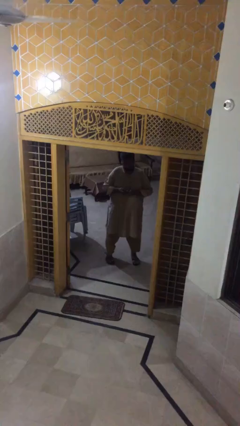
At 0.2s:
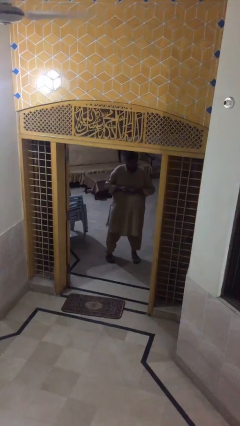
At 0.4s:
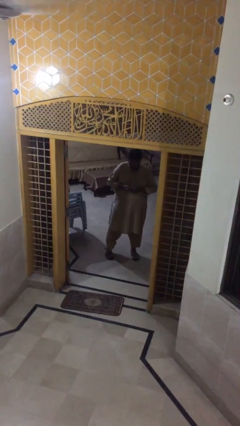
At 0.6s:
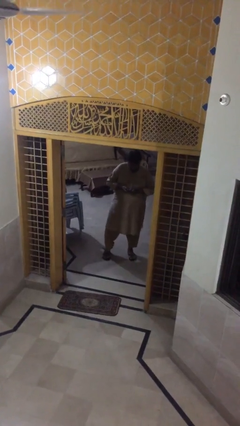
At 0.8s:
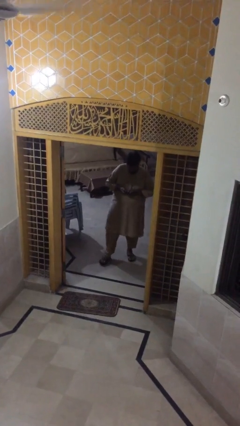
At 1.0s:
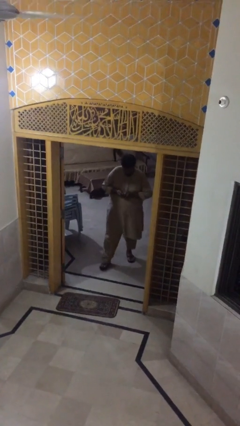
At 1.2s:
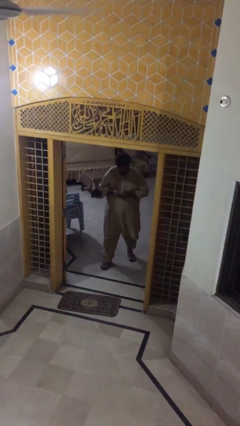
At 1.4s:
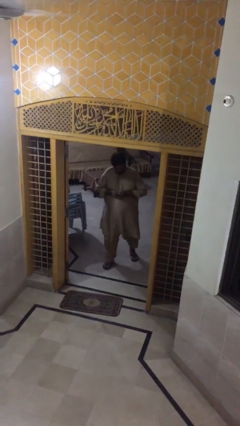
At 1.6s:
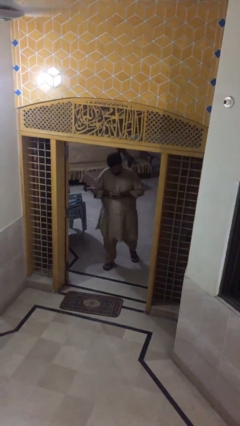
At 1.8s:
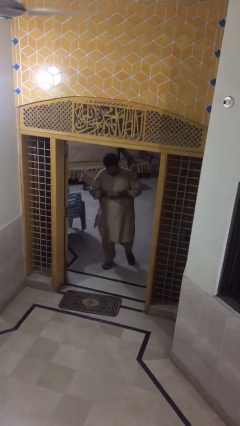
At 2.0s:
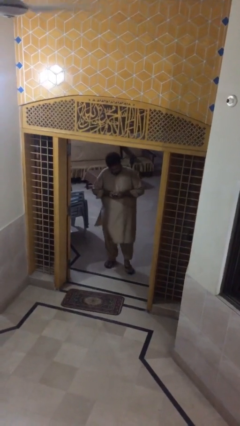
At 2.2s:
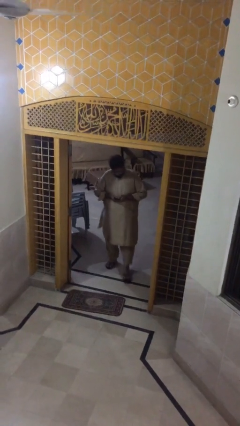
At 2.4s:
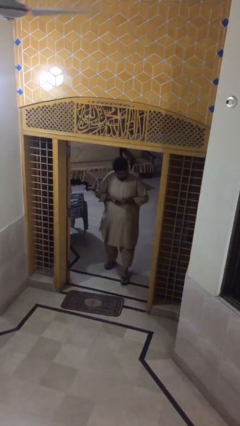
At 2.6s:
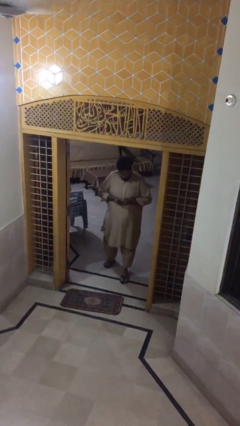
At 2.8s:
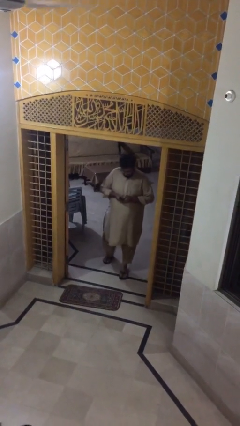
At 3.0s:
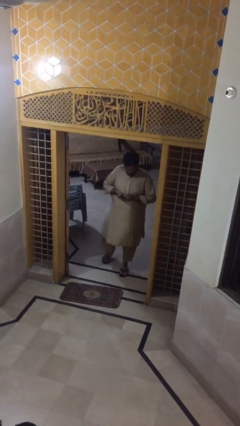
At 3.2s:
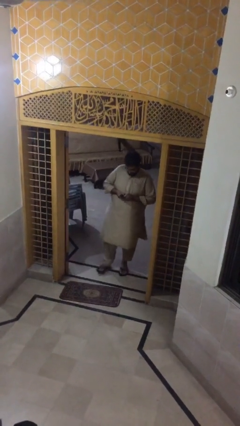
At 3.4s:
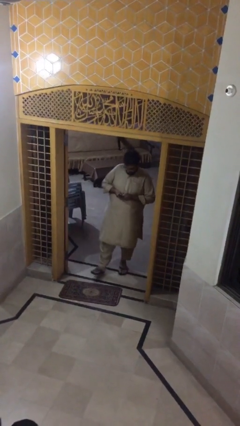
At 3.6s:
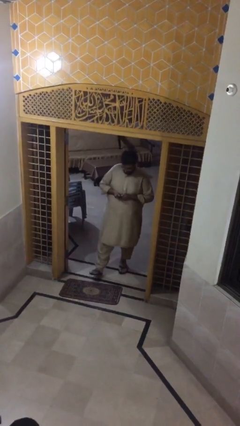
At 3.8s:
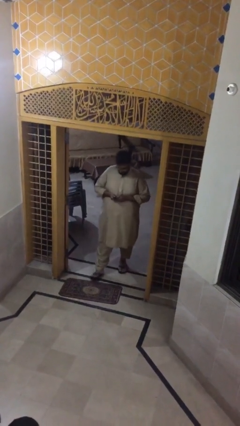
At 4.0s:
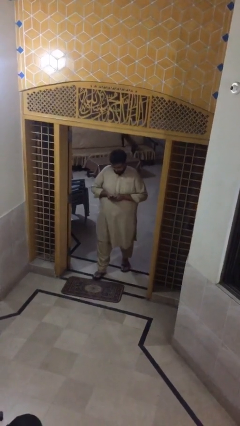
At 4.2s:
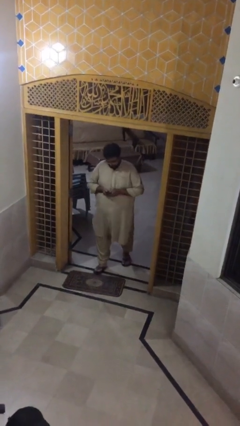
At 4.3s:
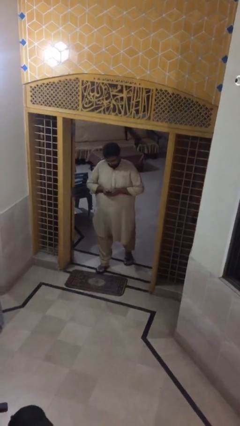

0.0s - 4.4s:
person texts on phone

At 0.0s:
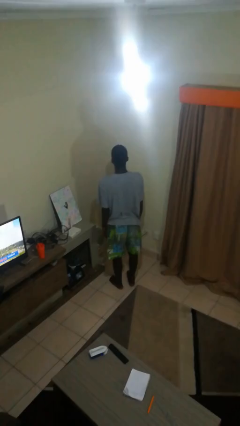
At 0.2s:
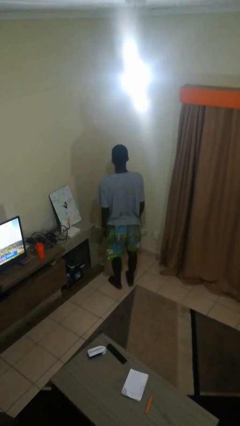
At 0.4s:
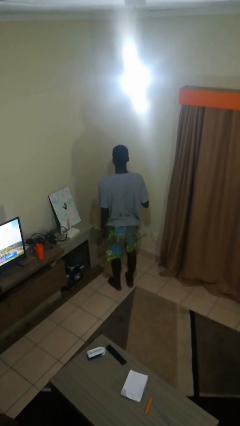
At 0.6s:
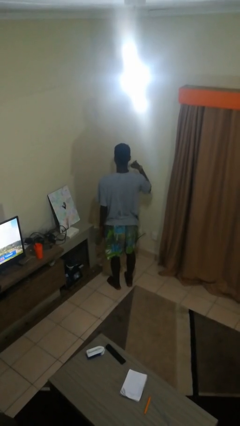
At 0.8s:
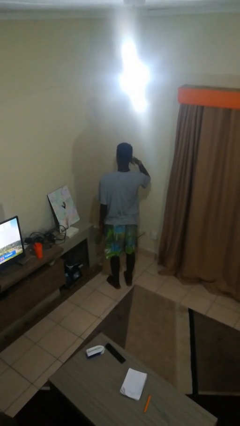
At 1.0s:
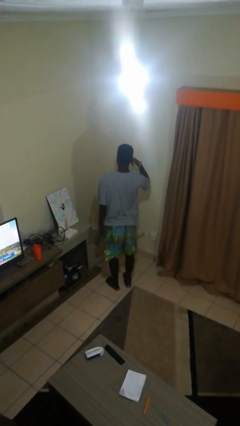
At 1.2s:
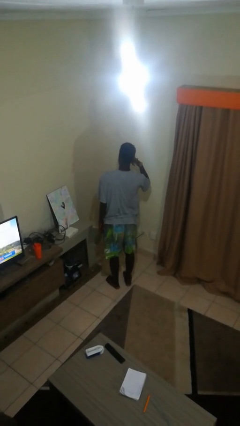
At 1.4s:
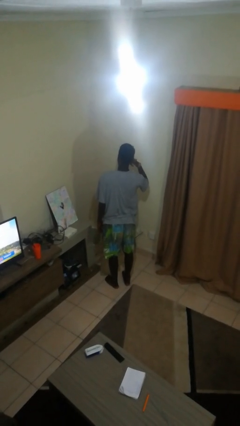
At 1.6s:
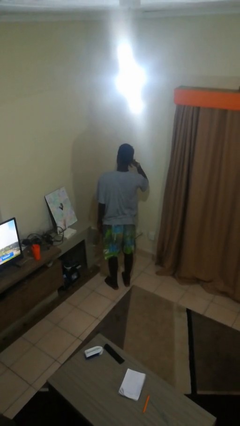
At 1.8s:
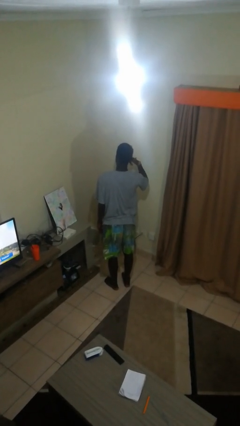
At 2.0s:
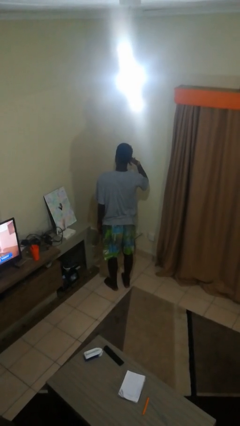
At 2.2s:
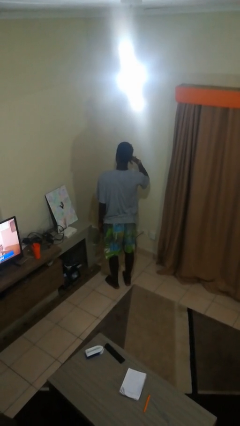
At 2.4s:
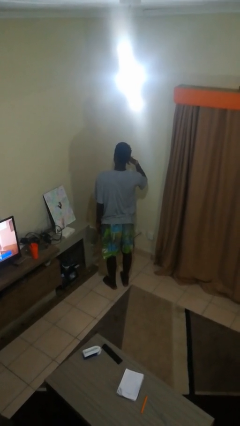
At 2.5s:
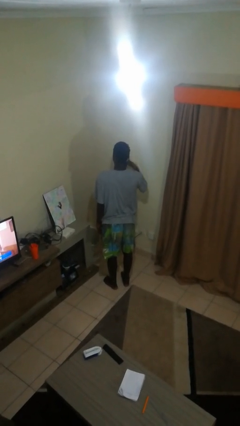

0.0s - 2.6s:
person gestures call me

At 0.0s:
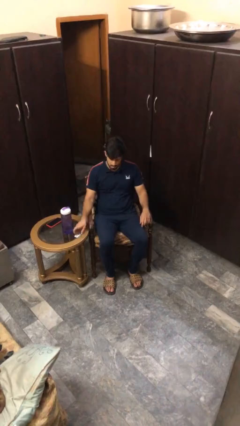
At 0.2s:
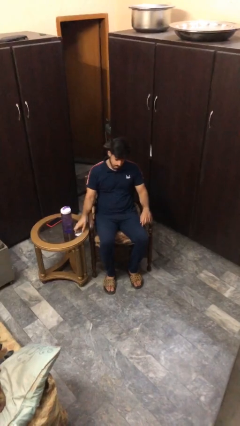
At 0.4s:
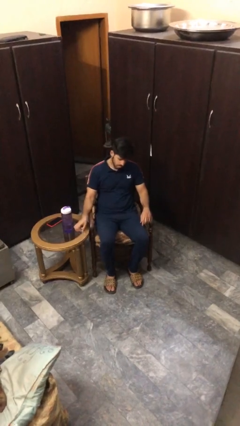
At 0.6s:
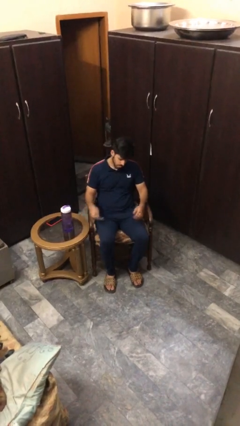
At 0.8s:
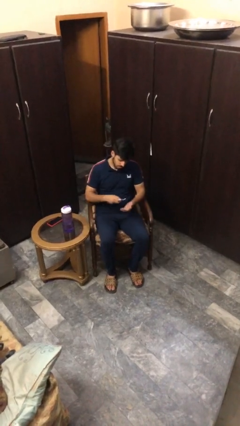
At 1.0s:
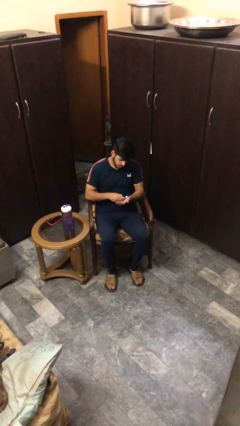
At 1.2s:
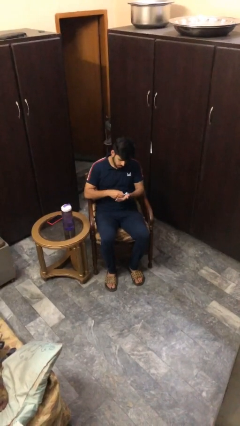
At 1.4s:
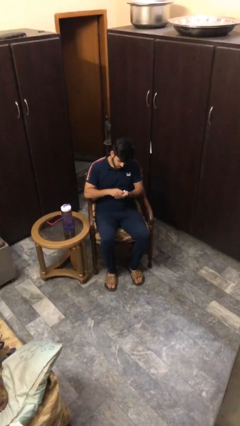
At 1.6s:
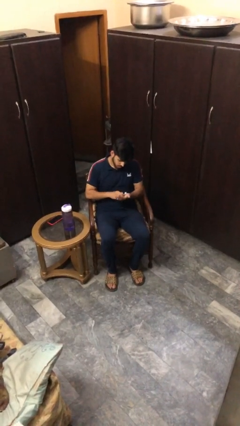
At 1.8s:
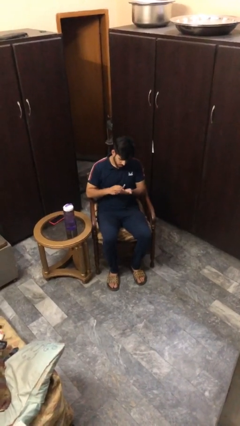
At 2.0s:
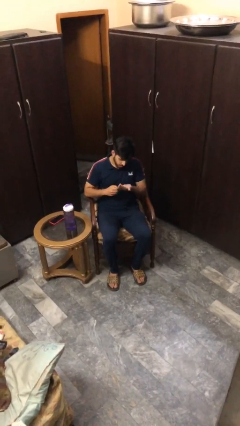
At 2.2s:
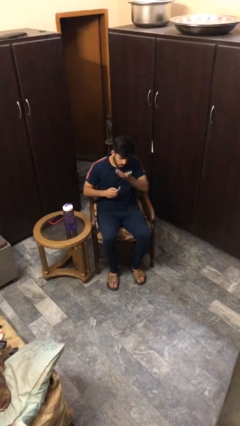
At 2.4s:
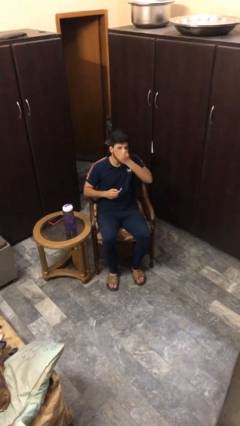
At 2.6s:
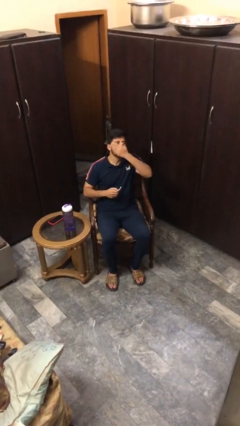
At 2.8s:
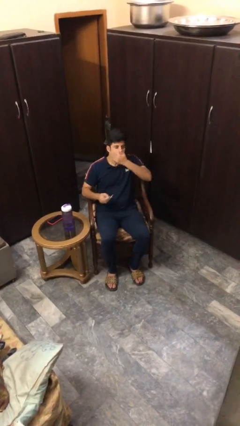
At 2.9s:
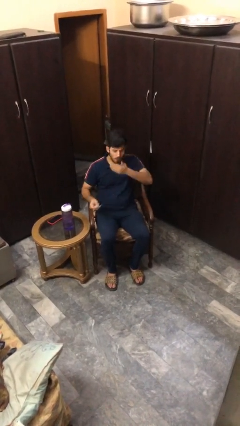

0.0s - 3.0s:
person takes medicine pills

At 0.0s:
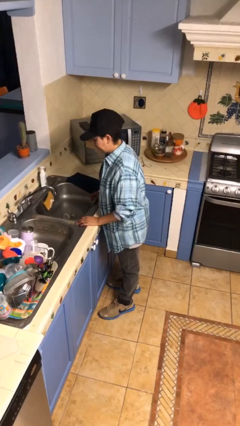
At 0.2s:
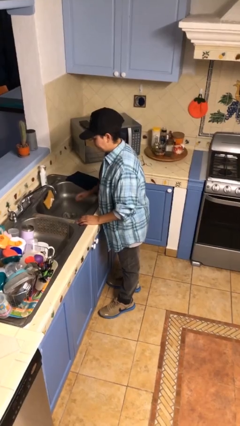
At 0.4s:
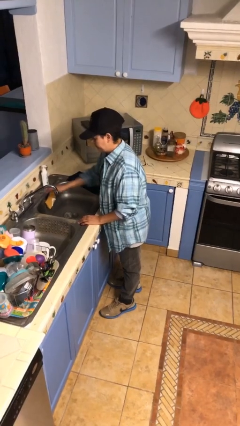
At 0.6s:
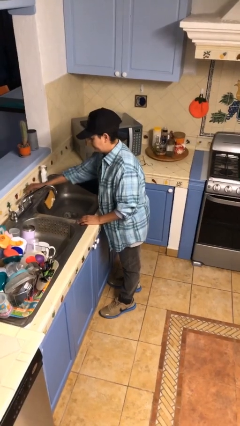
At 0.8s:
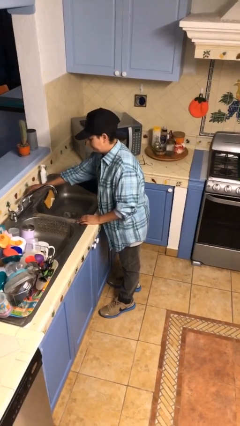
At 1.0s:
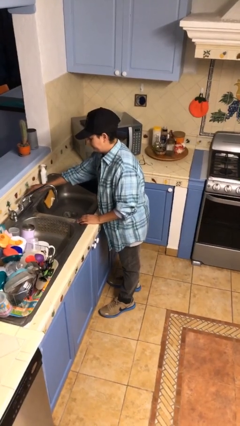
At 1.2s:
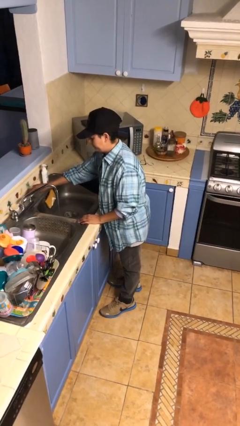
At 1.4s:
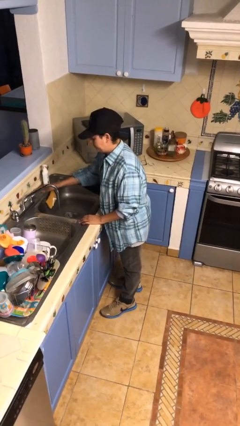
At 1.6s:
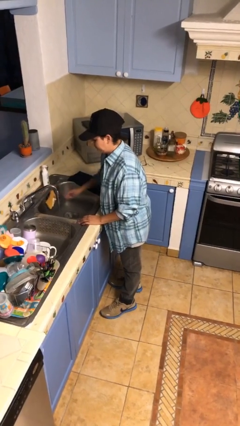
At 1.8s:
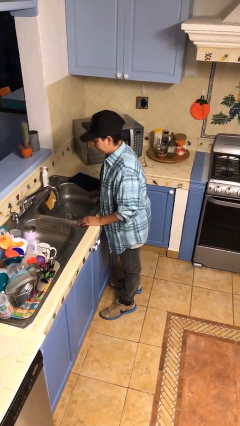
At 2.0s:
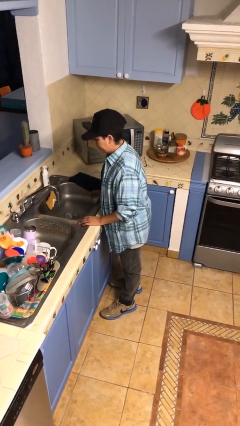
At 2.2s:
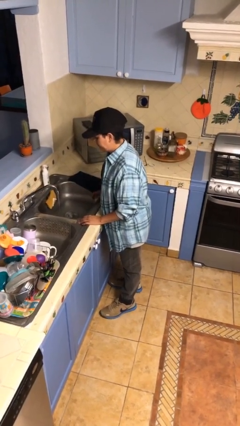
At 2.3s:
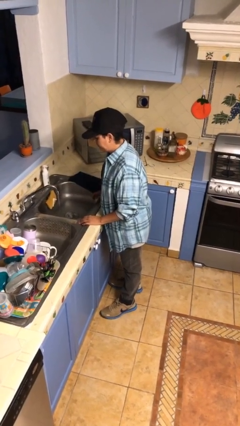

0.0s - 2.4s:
person turns on faucet

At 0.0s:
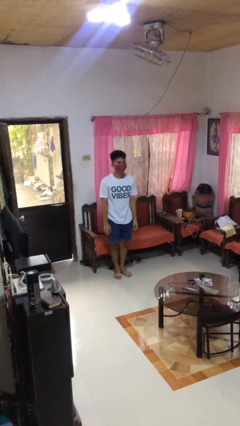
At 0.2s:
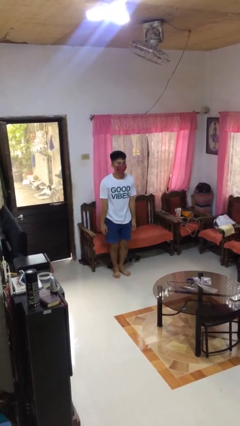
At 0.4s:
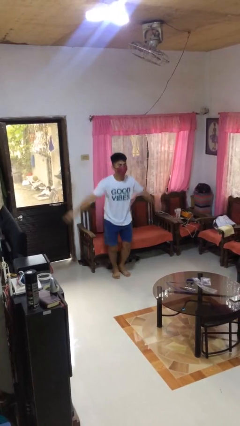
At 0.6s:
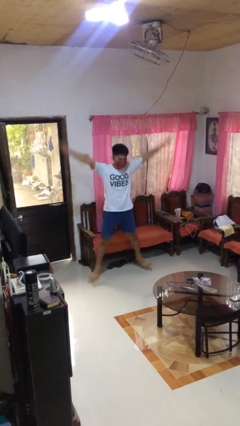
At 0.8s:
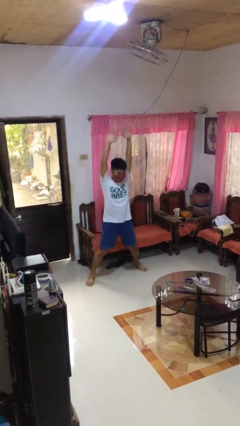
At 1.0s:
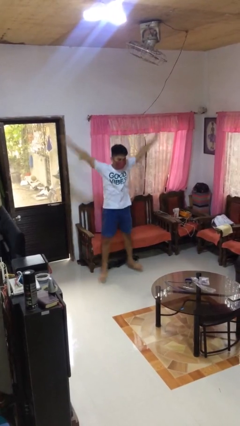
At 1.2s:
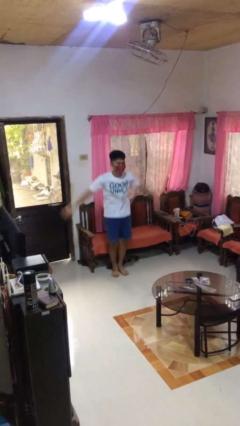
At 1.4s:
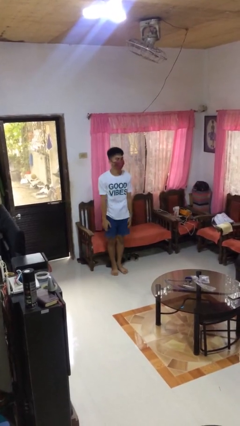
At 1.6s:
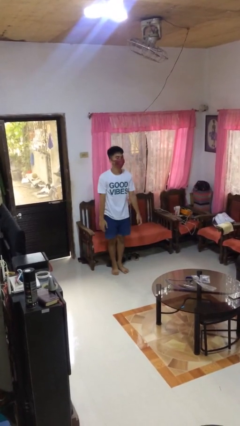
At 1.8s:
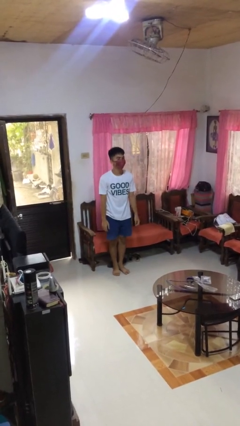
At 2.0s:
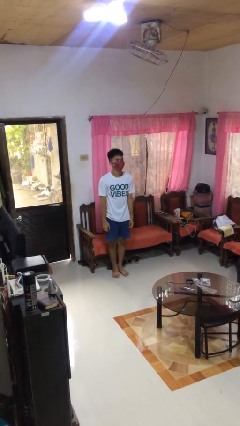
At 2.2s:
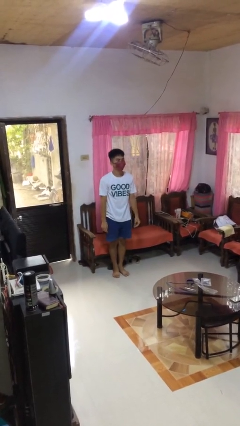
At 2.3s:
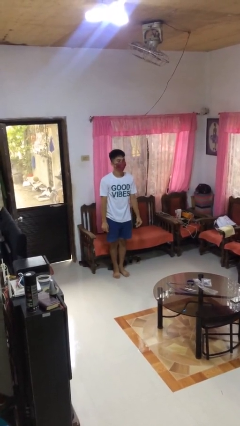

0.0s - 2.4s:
person exercises with jumping jacks

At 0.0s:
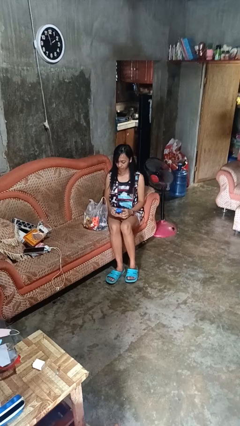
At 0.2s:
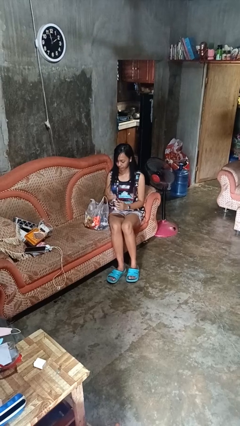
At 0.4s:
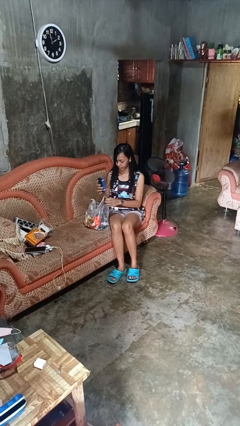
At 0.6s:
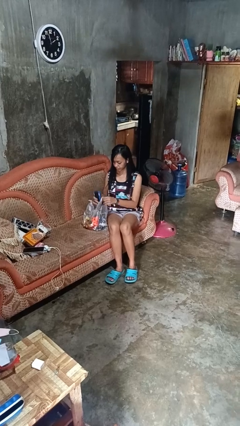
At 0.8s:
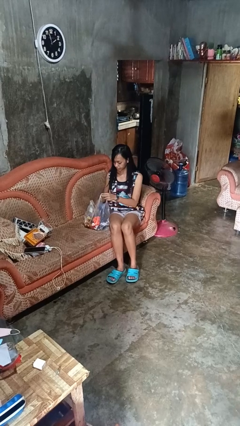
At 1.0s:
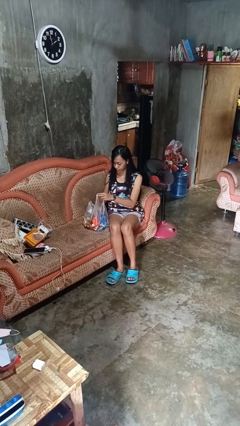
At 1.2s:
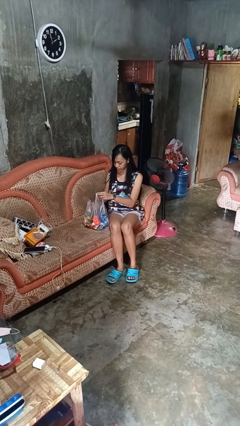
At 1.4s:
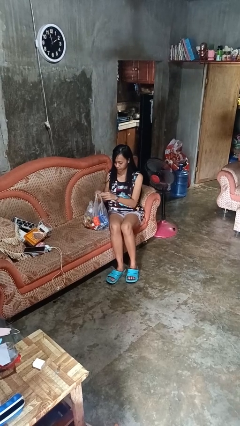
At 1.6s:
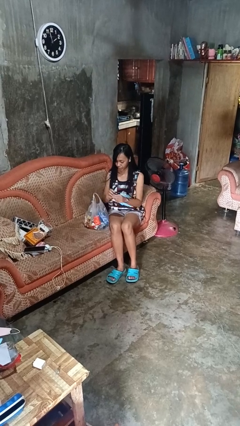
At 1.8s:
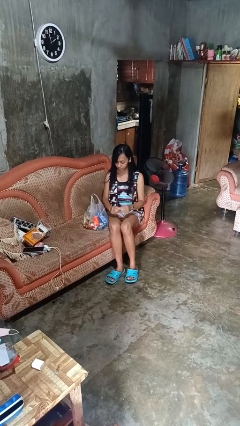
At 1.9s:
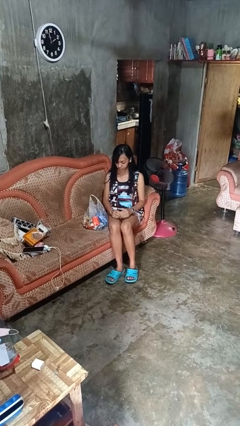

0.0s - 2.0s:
person puts object into bag

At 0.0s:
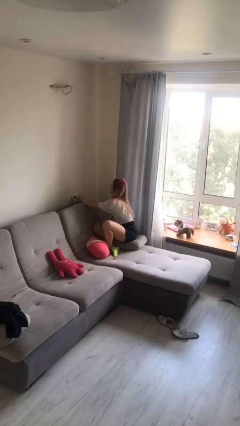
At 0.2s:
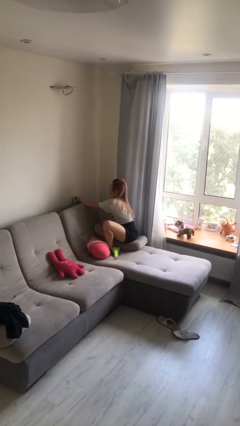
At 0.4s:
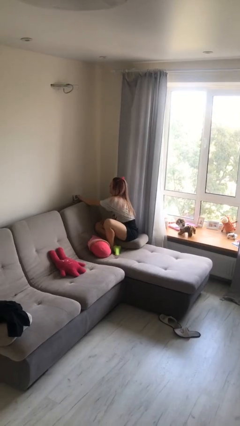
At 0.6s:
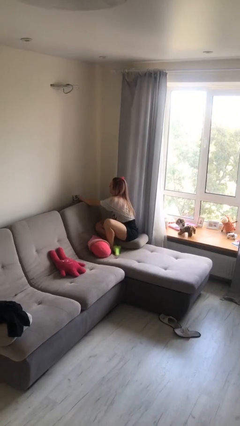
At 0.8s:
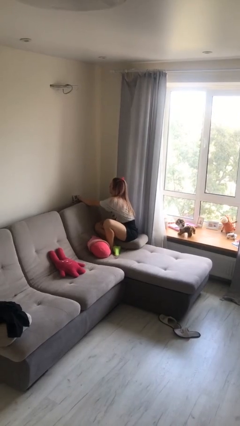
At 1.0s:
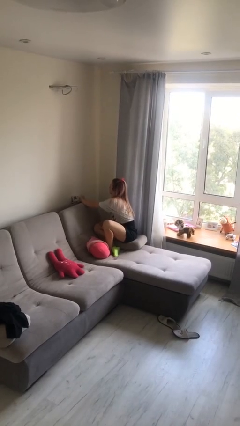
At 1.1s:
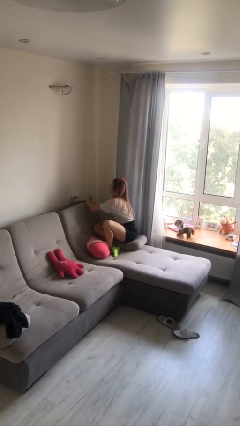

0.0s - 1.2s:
person adjusts thermostat
